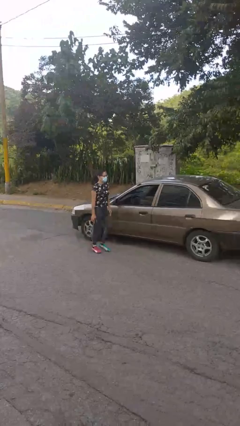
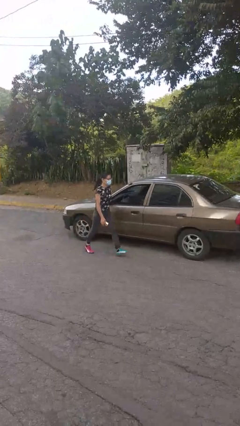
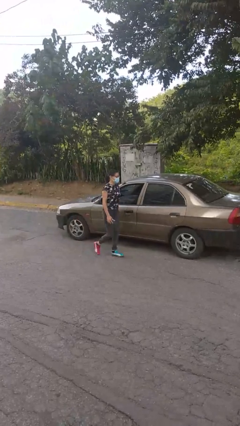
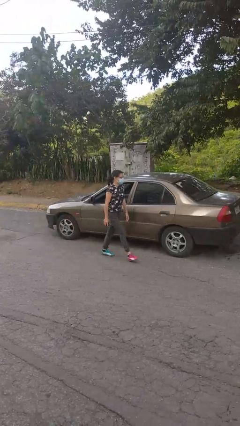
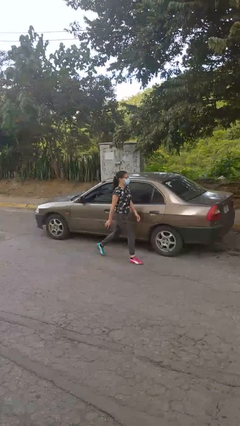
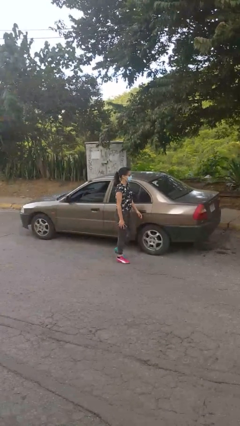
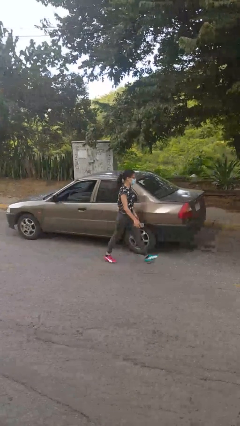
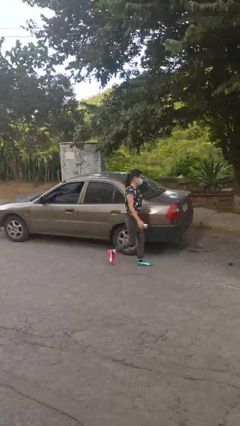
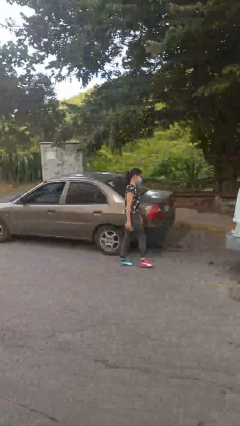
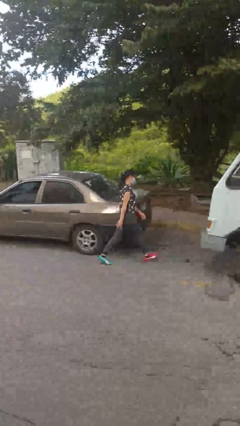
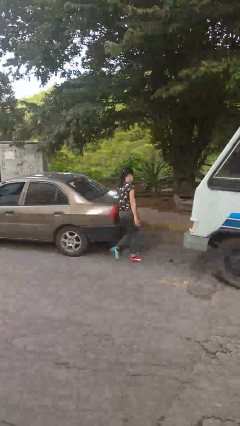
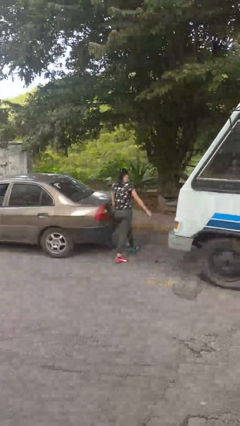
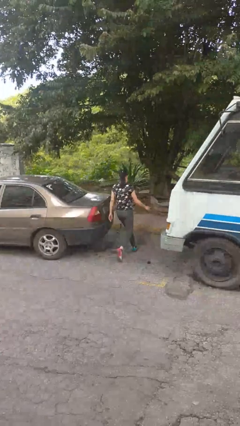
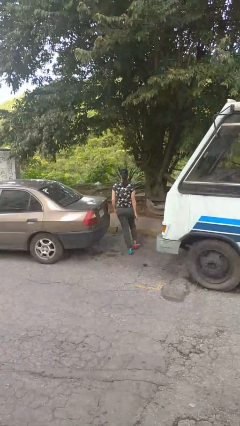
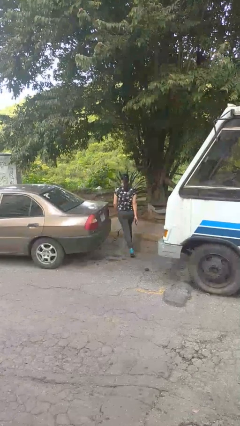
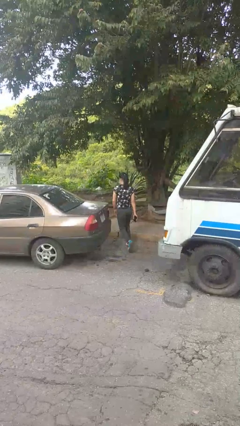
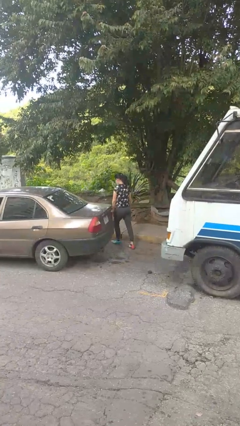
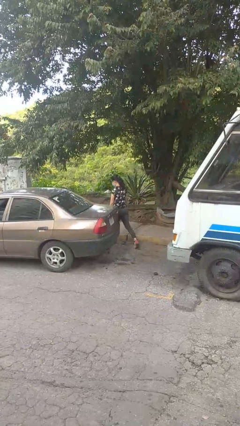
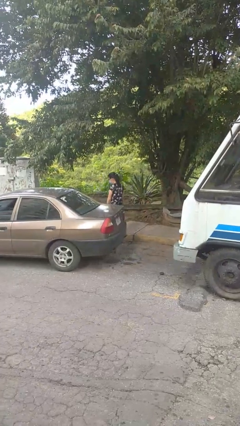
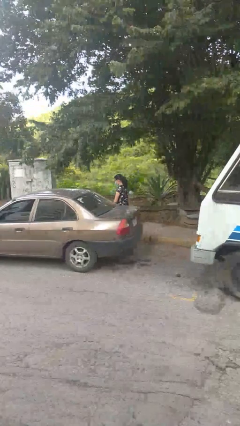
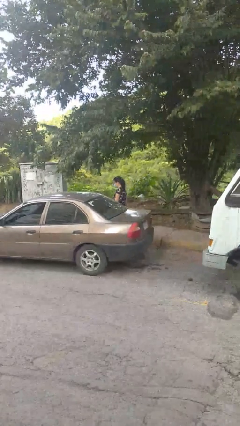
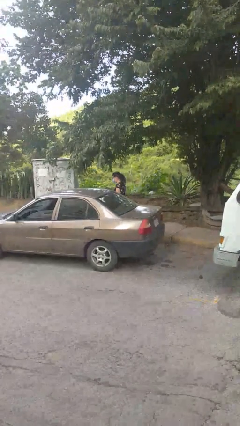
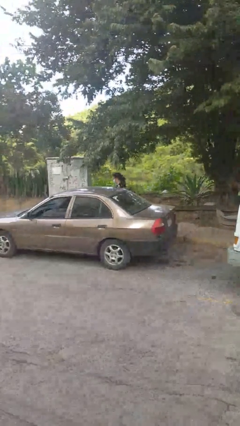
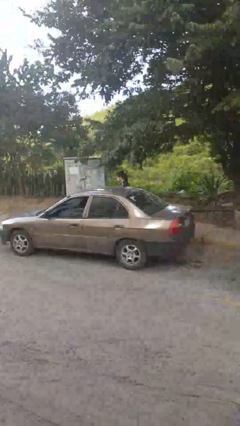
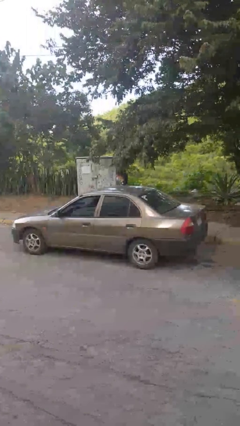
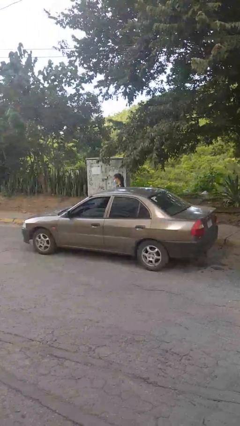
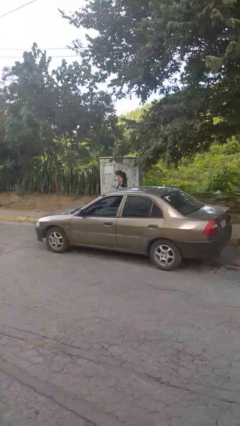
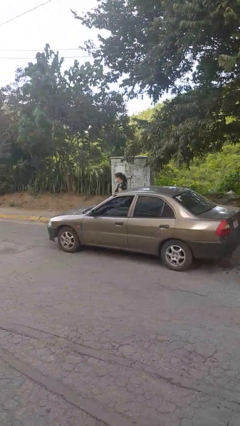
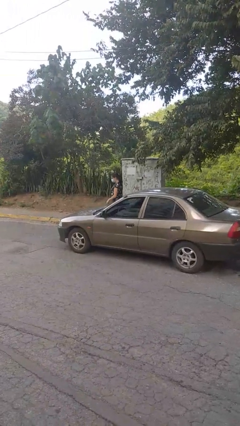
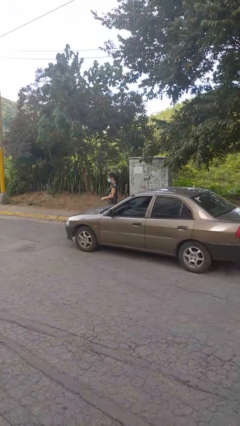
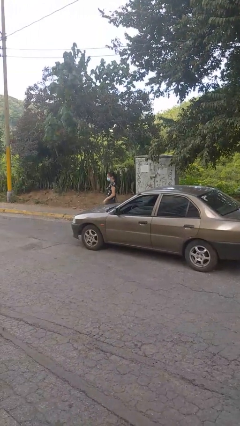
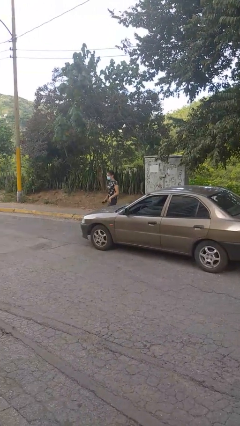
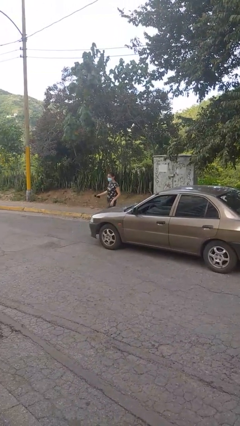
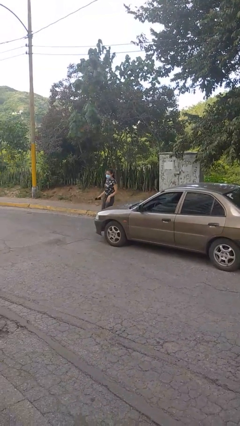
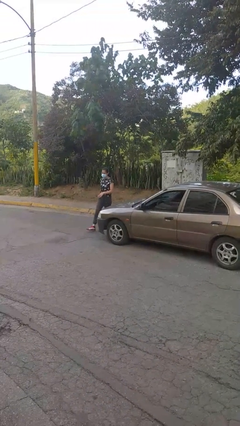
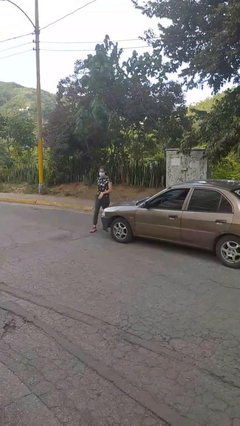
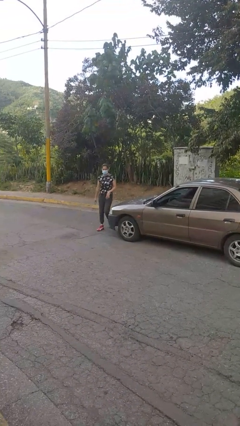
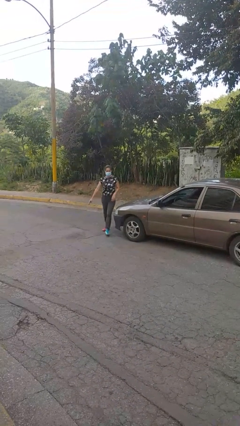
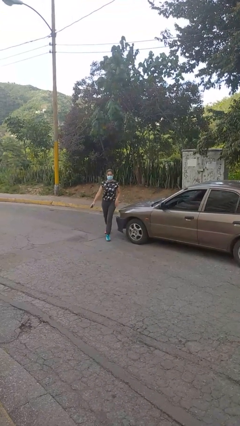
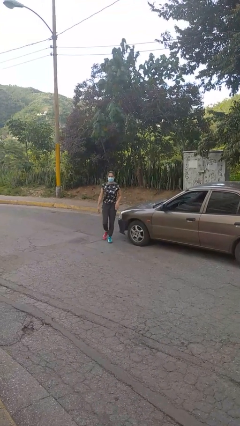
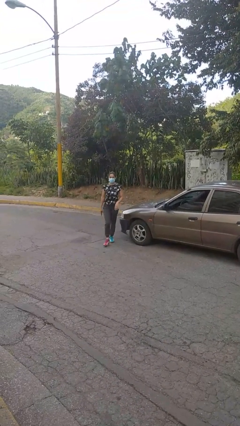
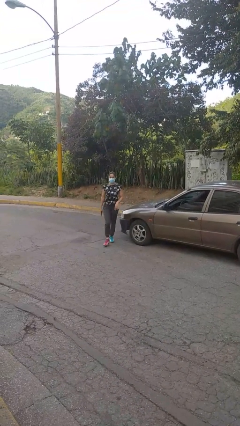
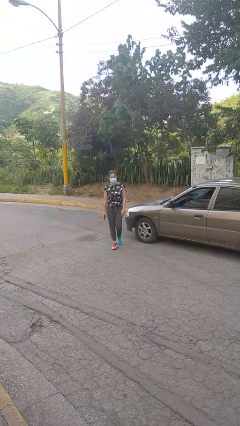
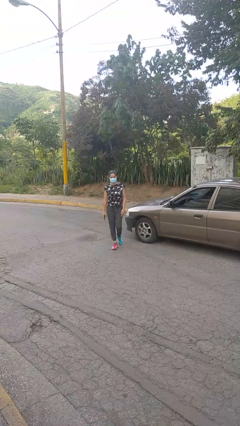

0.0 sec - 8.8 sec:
person walks around car

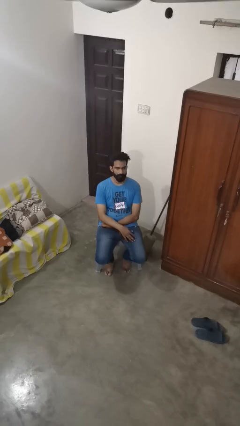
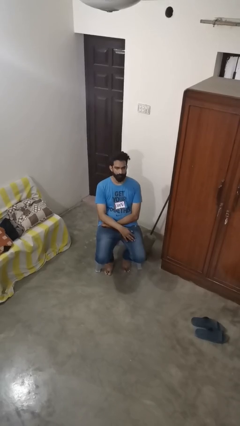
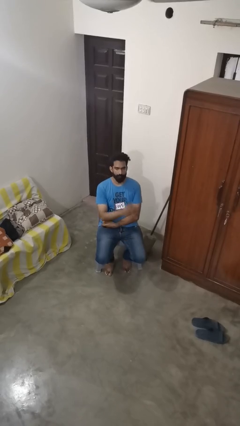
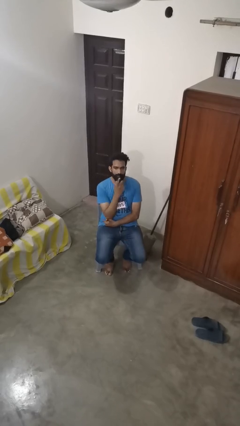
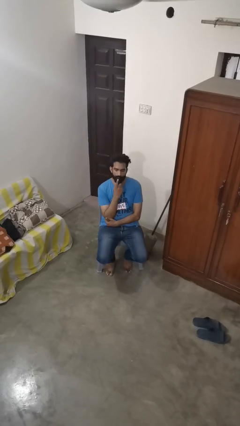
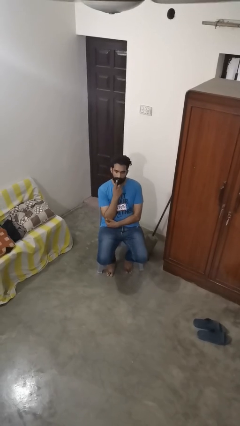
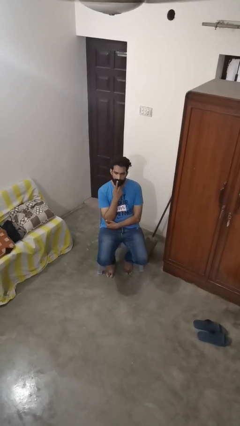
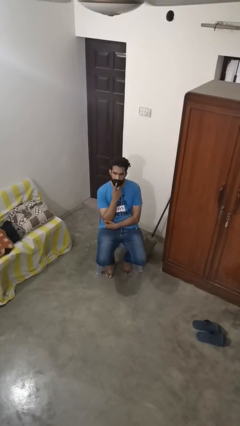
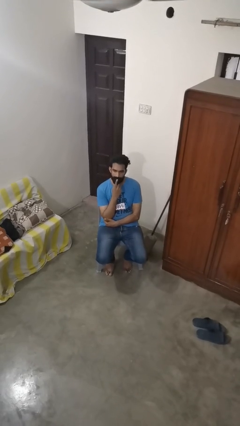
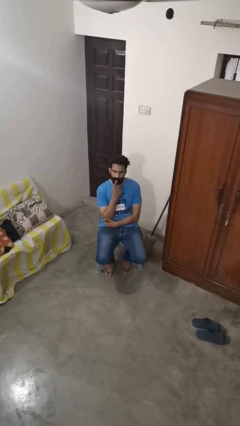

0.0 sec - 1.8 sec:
person strokes chin

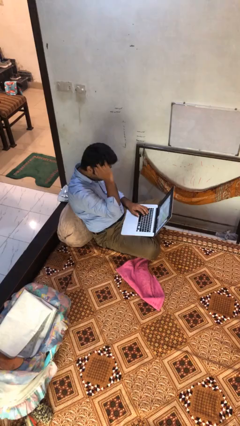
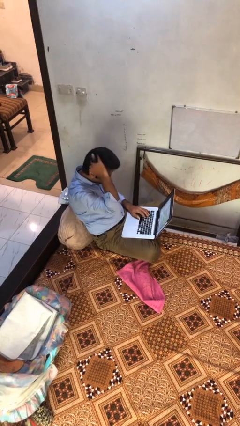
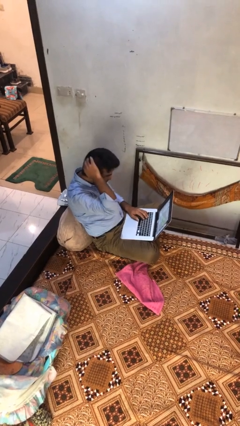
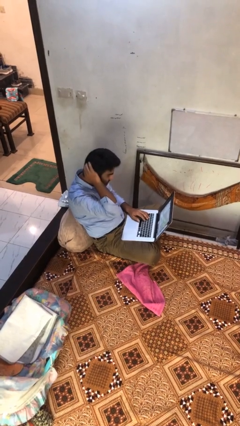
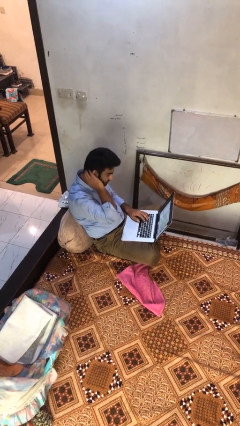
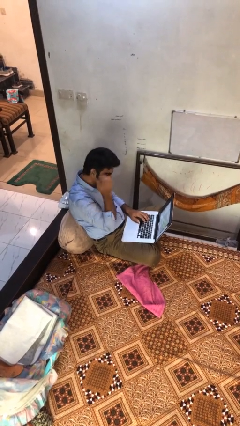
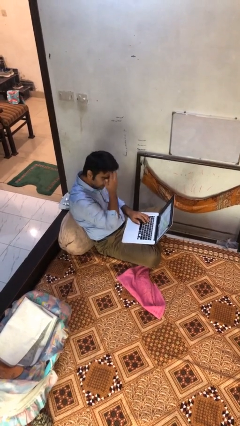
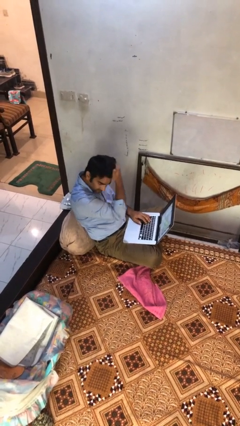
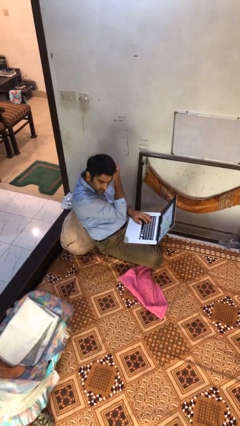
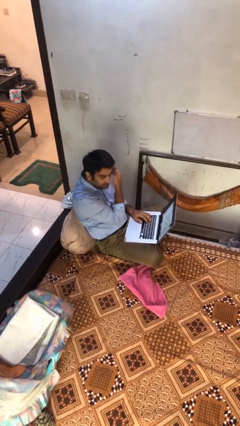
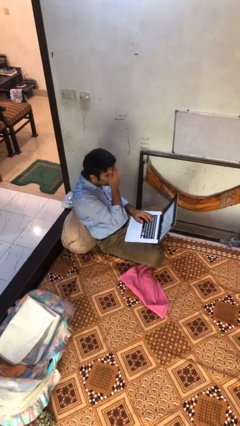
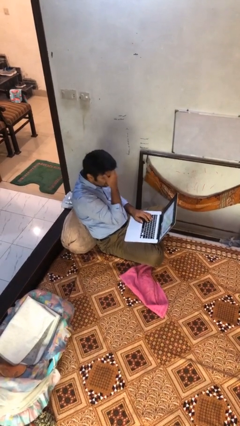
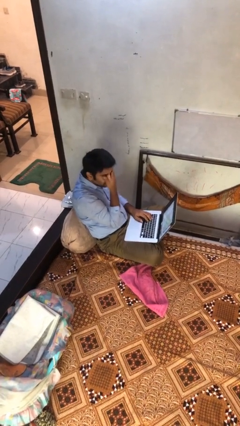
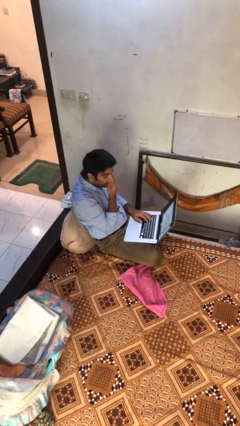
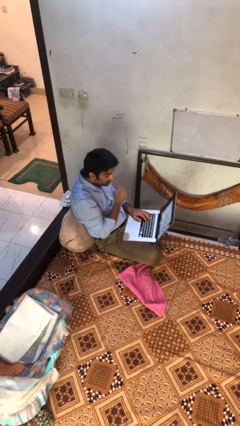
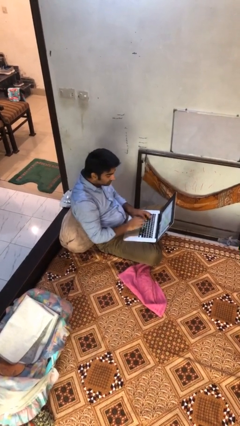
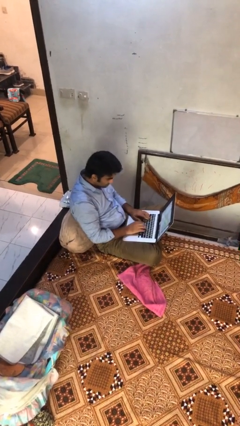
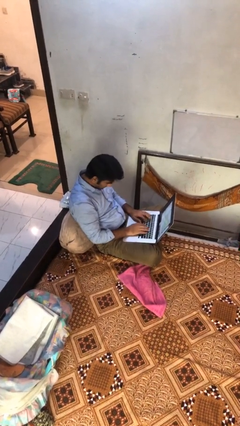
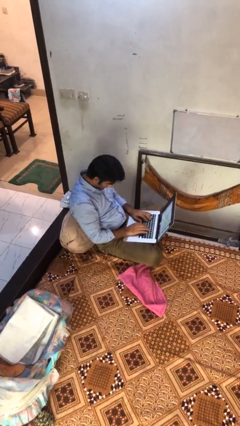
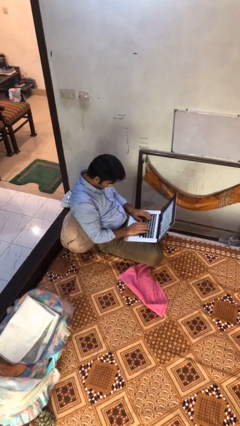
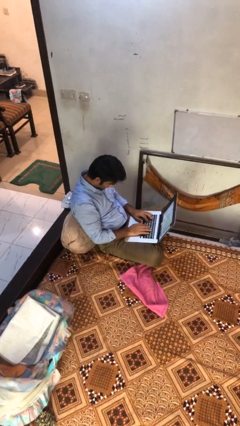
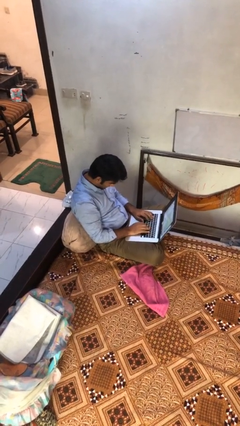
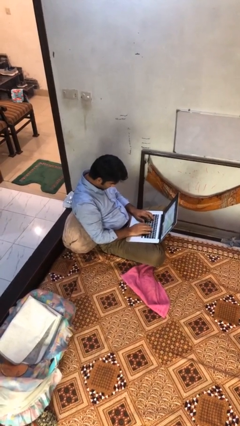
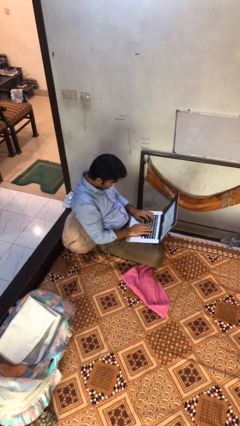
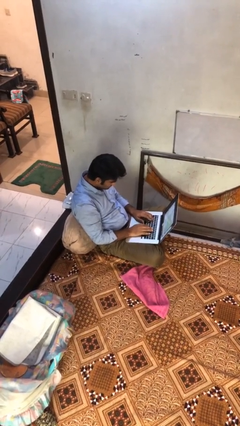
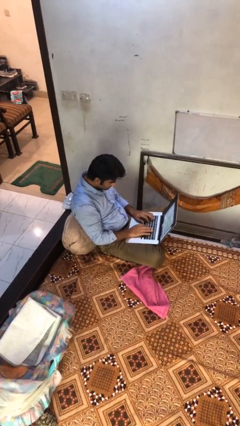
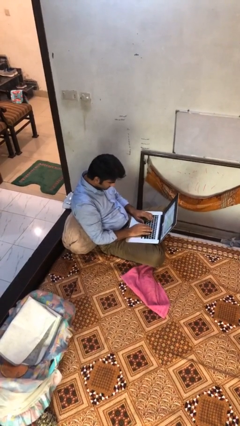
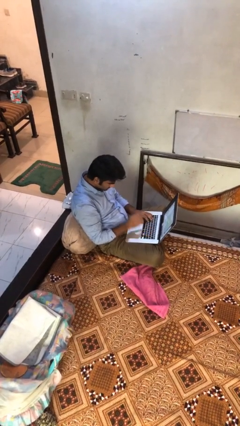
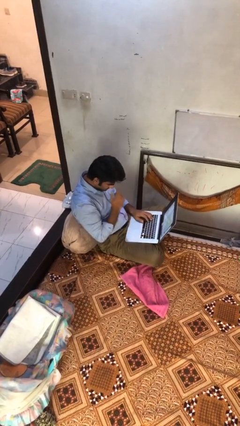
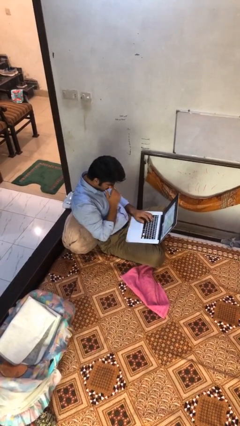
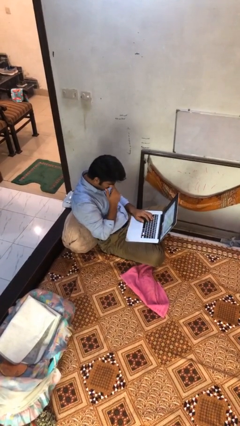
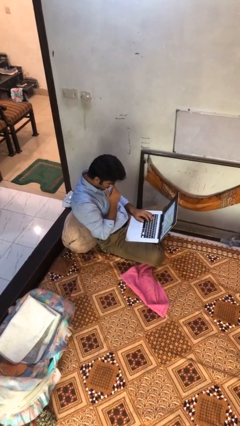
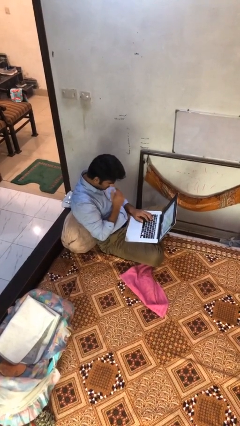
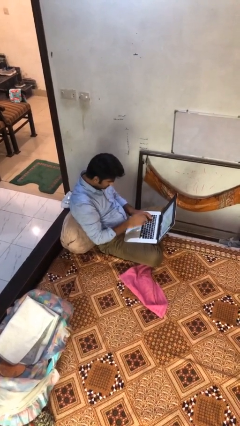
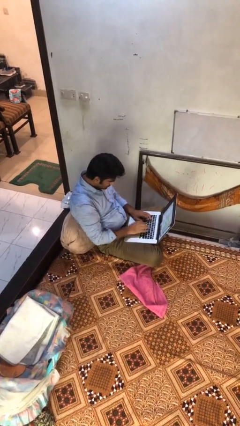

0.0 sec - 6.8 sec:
person interacts with laptop

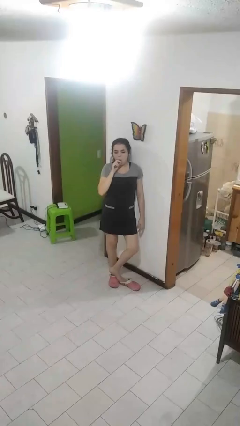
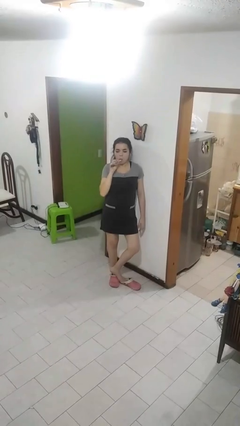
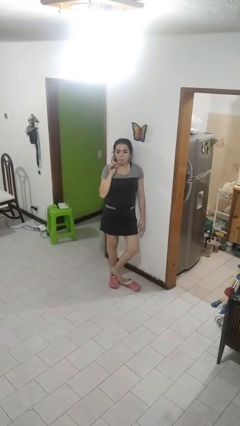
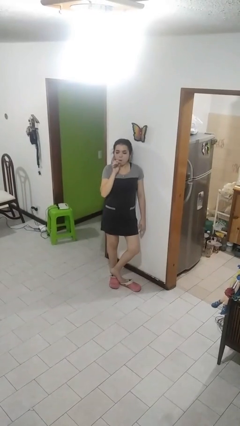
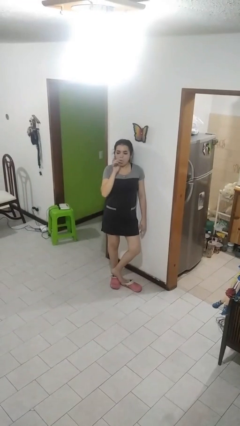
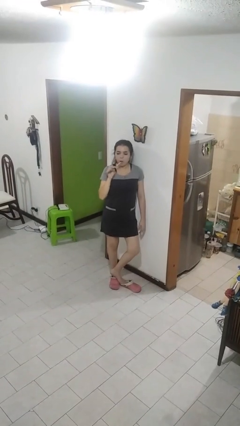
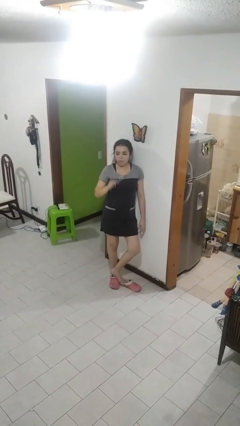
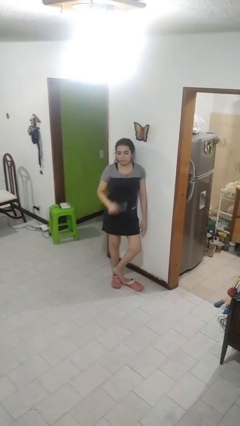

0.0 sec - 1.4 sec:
person brushes teeth
